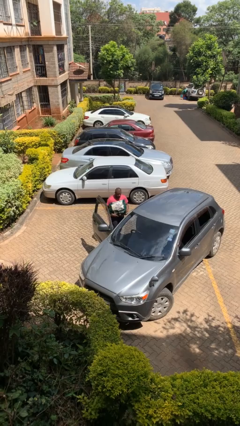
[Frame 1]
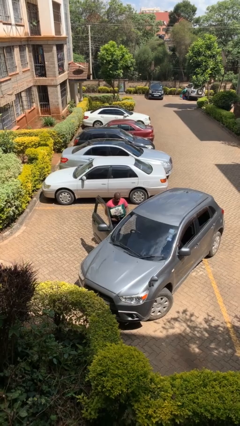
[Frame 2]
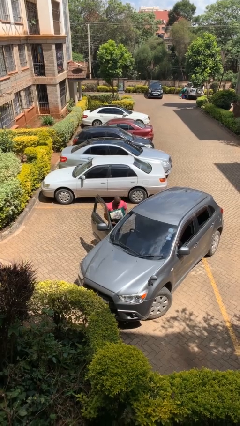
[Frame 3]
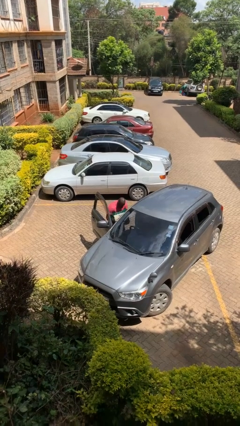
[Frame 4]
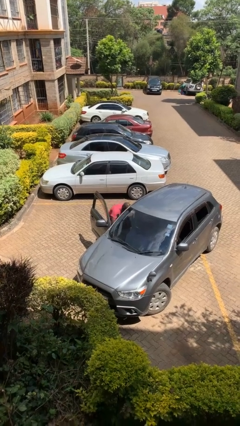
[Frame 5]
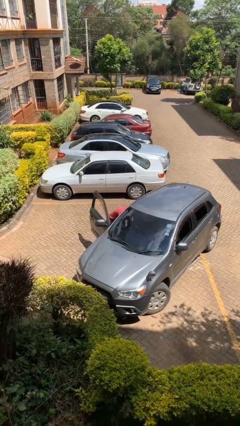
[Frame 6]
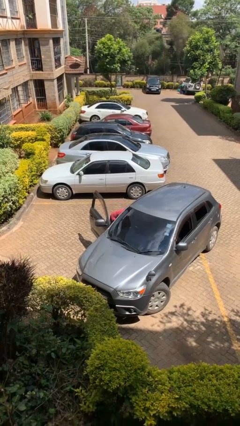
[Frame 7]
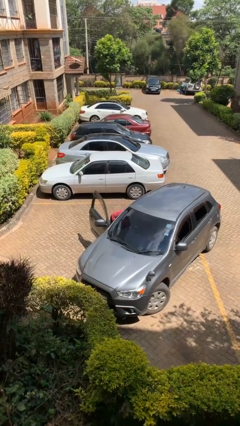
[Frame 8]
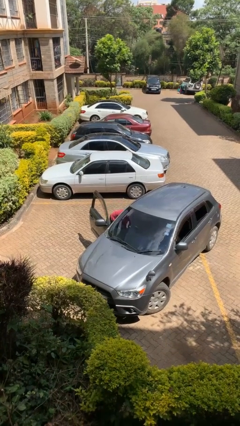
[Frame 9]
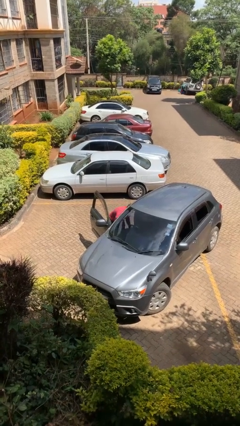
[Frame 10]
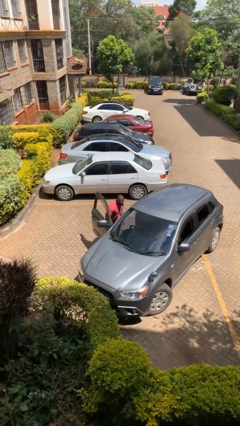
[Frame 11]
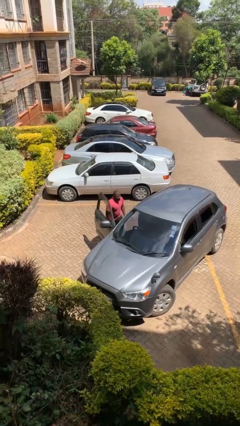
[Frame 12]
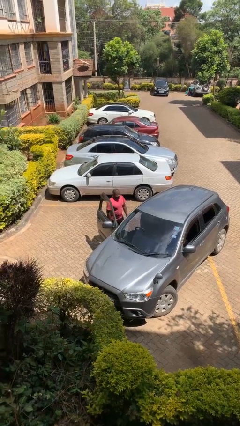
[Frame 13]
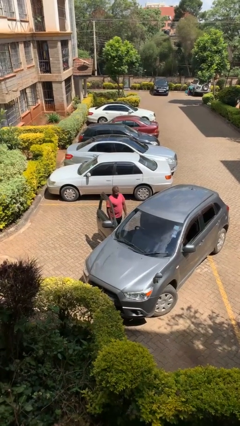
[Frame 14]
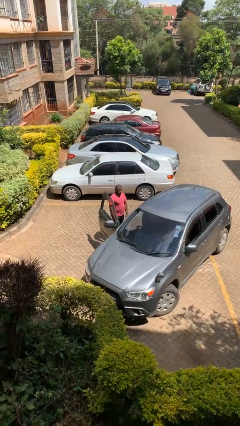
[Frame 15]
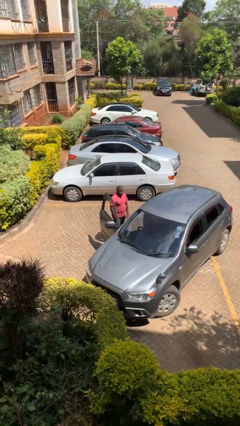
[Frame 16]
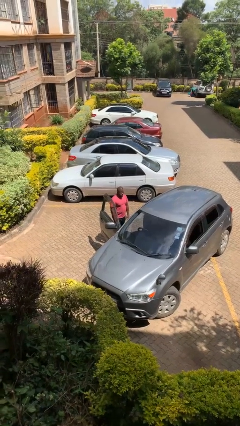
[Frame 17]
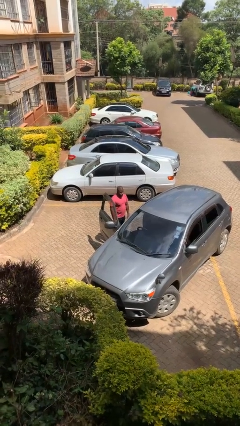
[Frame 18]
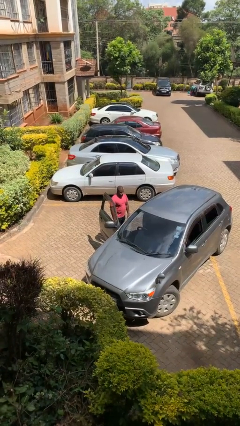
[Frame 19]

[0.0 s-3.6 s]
person loads car

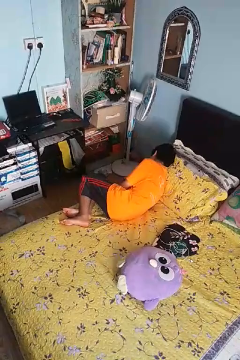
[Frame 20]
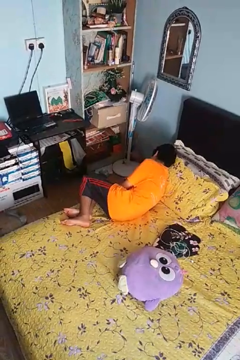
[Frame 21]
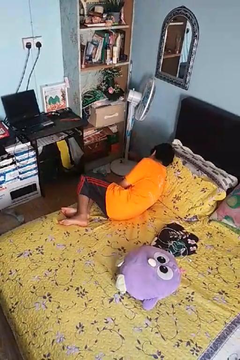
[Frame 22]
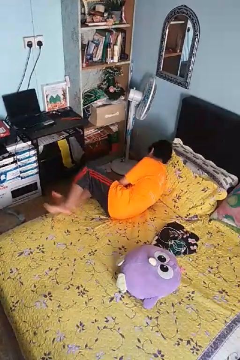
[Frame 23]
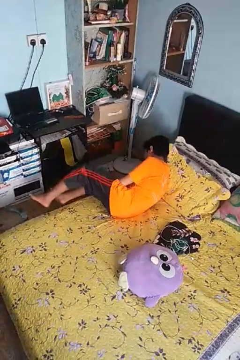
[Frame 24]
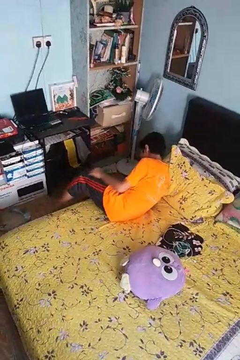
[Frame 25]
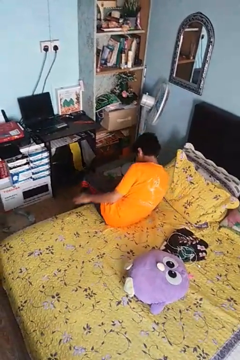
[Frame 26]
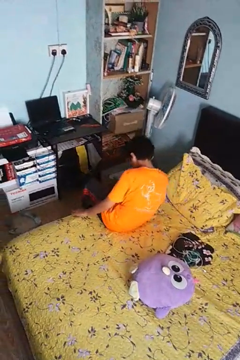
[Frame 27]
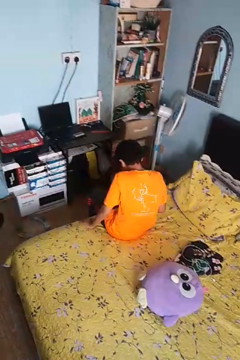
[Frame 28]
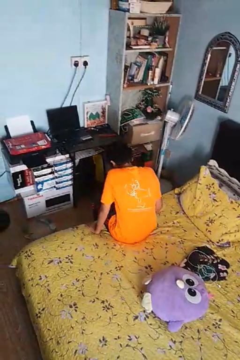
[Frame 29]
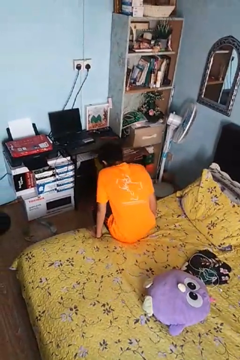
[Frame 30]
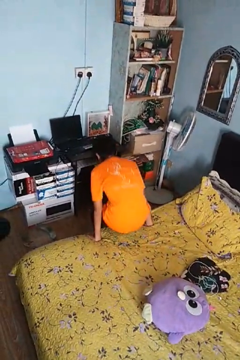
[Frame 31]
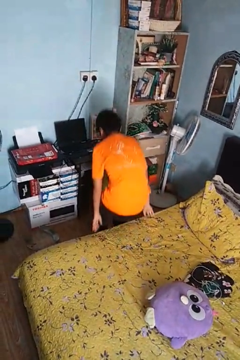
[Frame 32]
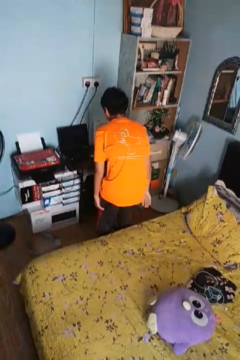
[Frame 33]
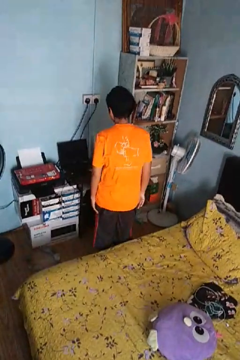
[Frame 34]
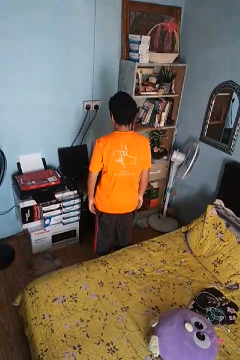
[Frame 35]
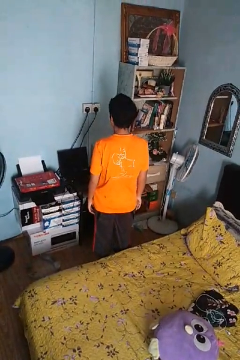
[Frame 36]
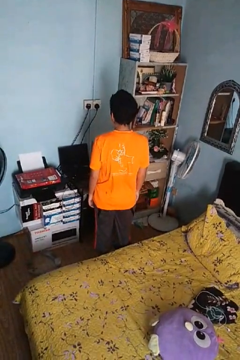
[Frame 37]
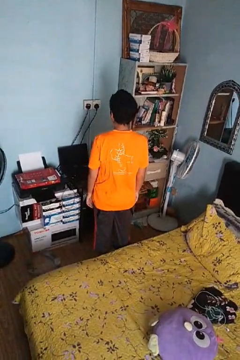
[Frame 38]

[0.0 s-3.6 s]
person stands up

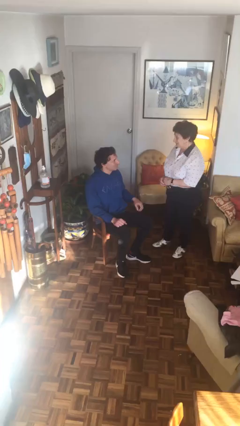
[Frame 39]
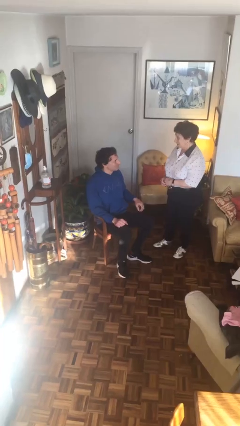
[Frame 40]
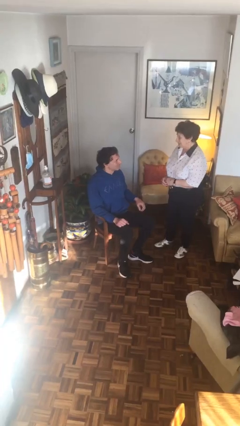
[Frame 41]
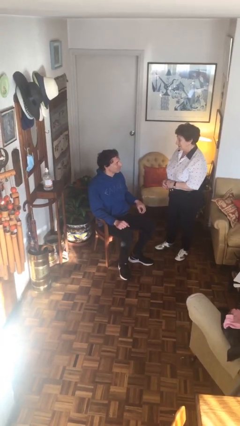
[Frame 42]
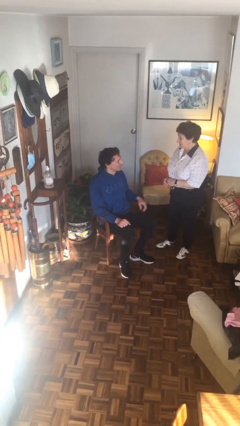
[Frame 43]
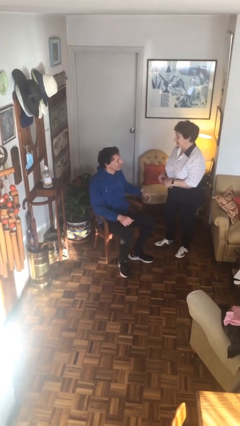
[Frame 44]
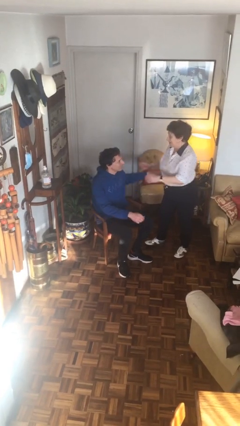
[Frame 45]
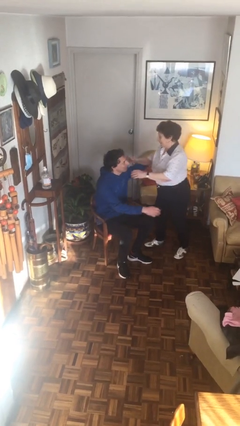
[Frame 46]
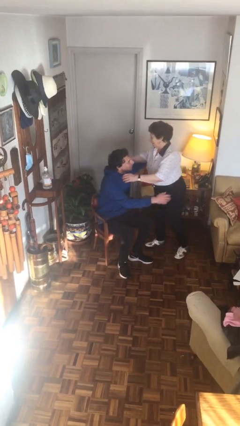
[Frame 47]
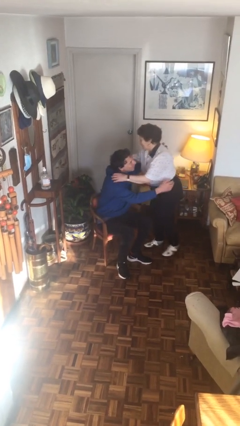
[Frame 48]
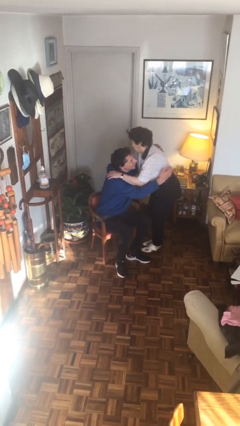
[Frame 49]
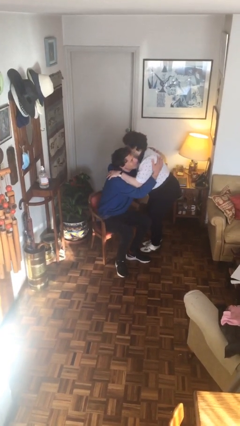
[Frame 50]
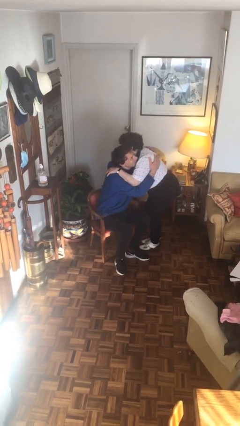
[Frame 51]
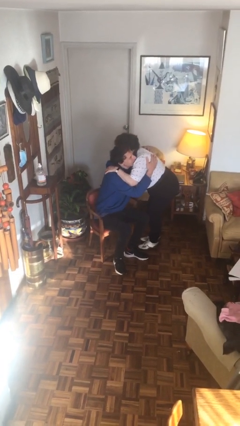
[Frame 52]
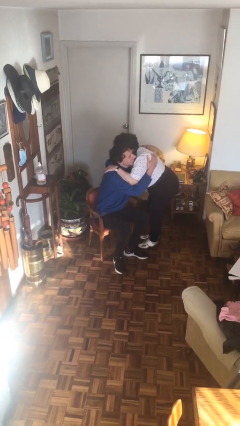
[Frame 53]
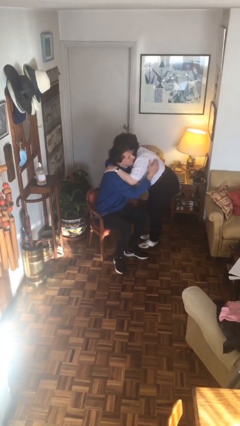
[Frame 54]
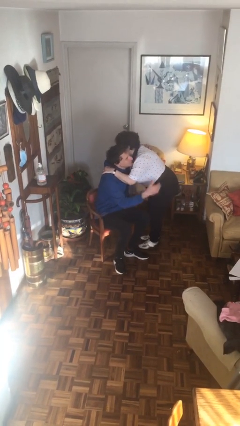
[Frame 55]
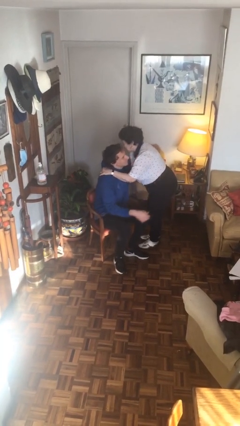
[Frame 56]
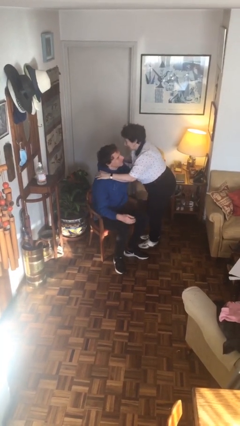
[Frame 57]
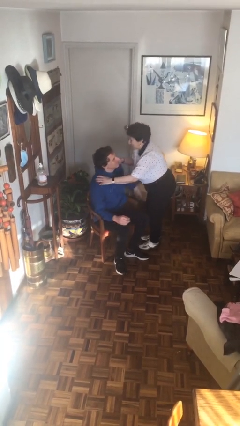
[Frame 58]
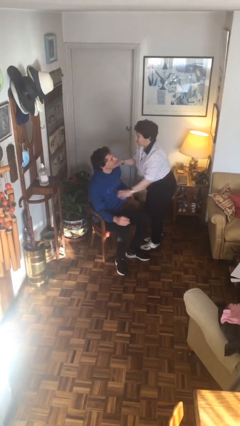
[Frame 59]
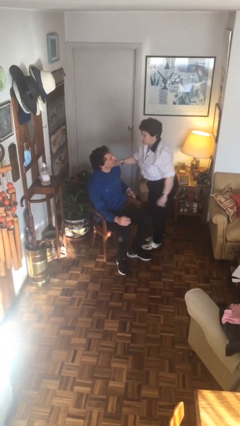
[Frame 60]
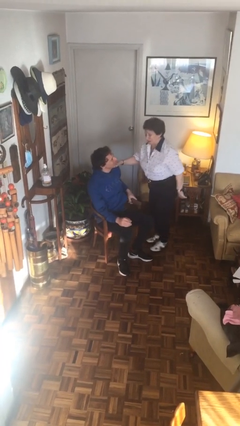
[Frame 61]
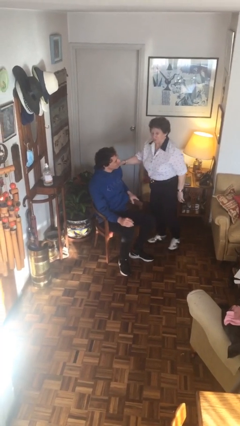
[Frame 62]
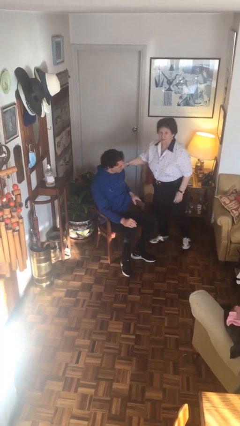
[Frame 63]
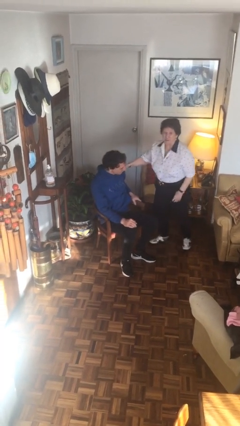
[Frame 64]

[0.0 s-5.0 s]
person embraces person

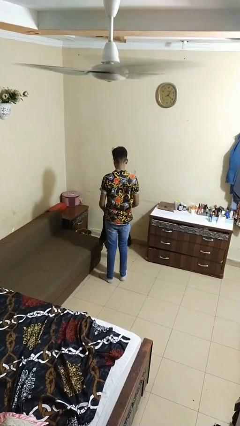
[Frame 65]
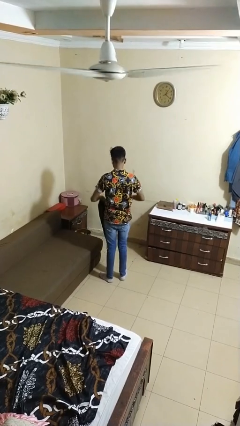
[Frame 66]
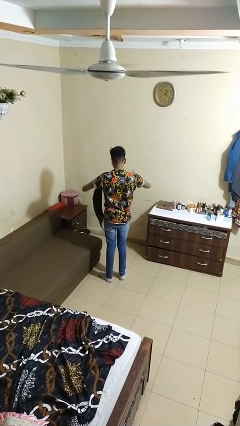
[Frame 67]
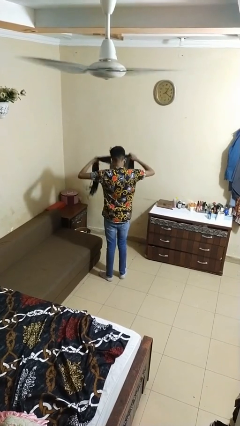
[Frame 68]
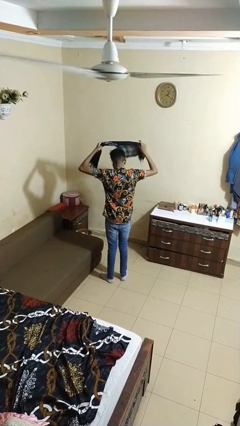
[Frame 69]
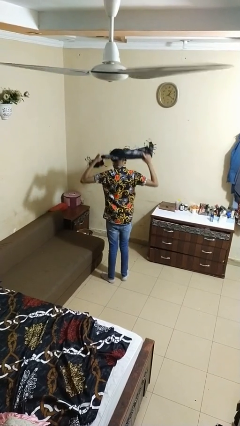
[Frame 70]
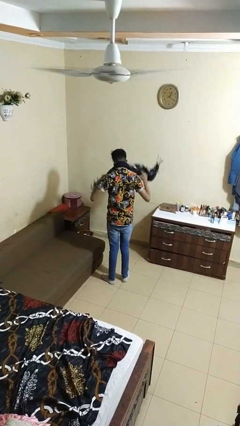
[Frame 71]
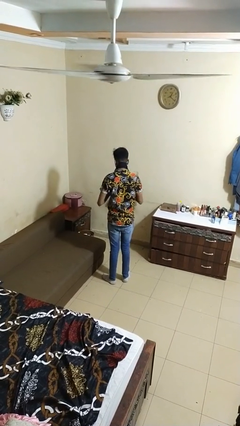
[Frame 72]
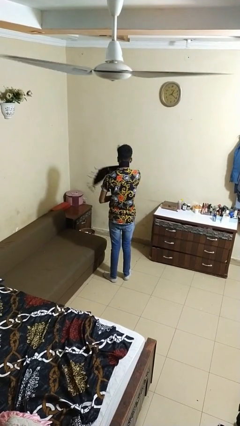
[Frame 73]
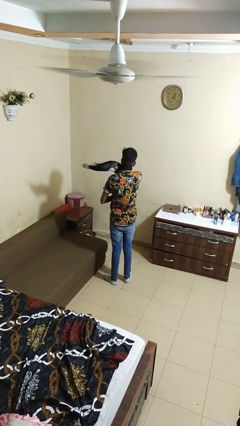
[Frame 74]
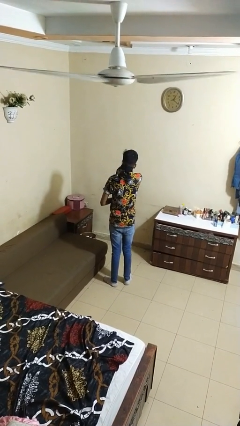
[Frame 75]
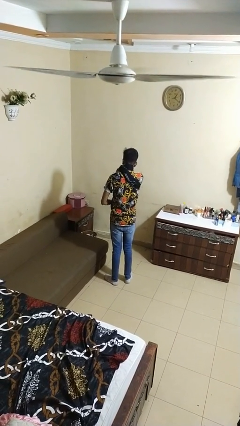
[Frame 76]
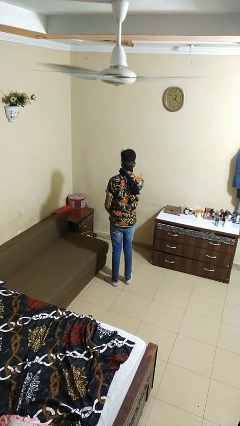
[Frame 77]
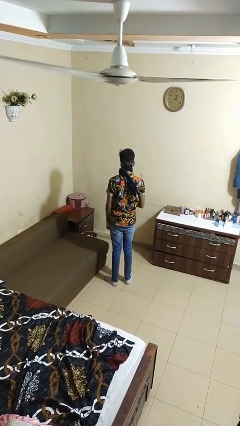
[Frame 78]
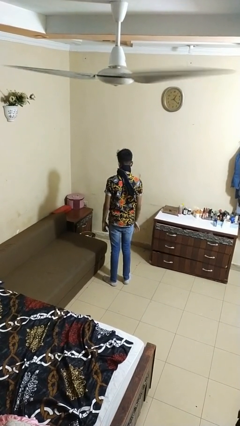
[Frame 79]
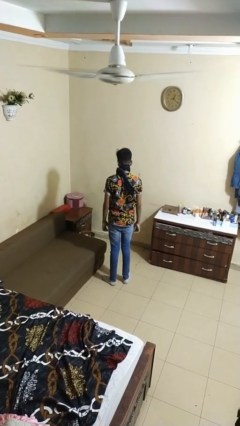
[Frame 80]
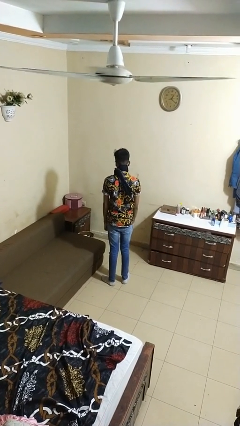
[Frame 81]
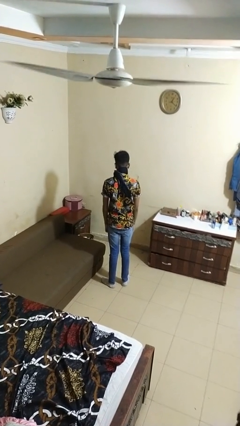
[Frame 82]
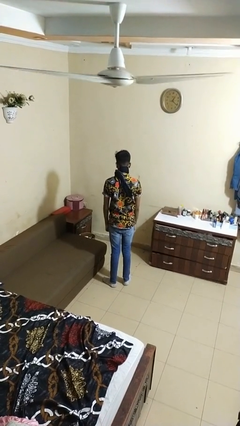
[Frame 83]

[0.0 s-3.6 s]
person puts on scarf

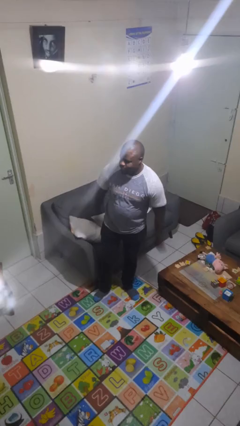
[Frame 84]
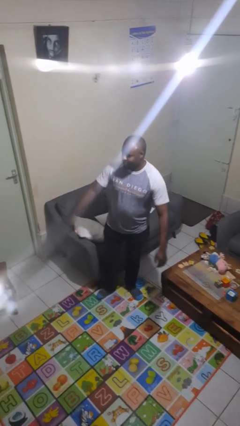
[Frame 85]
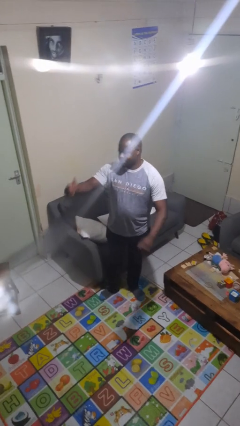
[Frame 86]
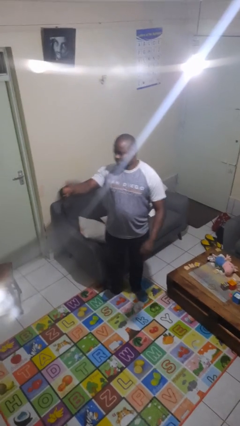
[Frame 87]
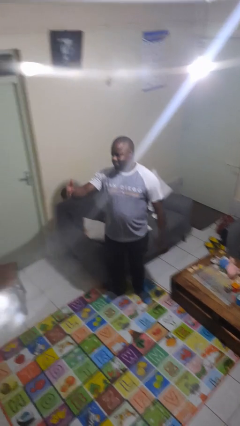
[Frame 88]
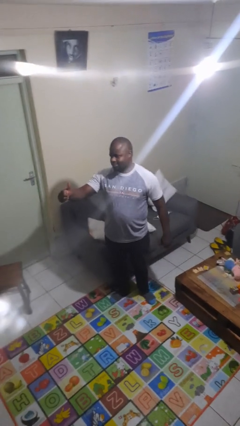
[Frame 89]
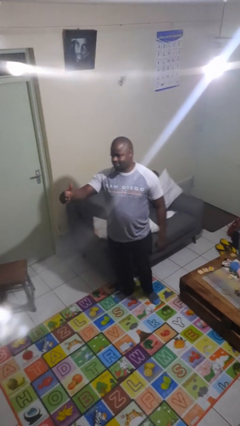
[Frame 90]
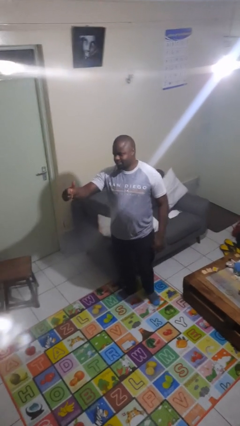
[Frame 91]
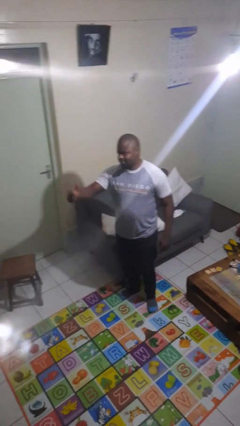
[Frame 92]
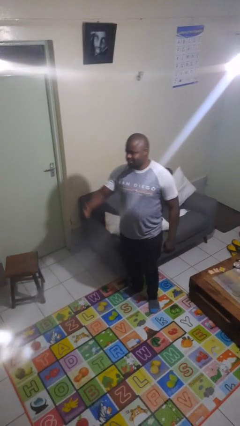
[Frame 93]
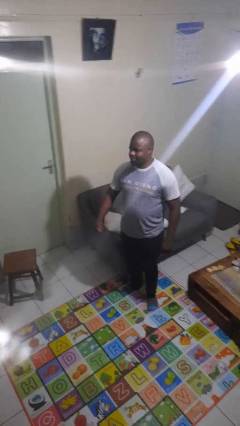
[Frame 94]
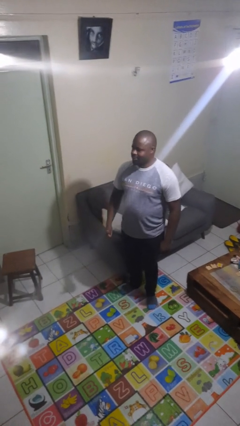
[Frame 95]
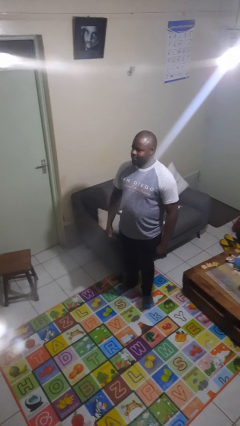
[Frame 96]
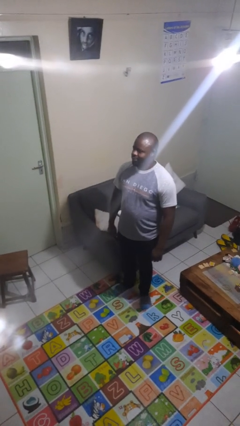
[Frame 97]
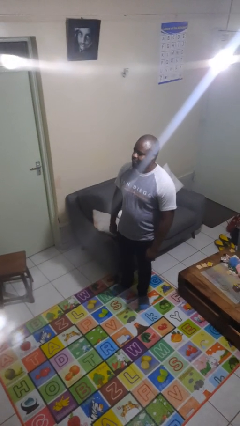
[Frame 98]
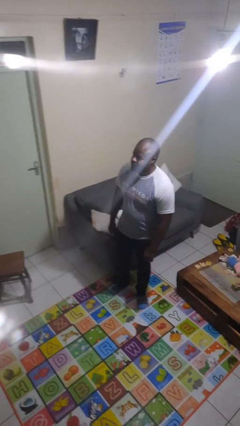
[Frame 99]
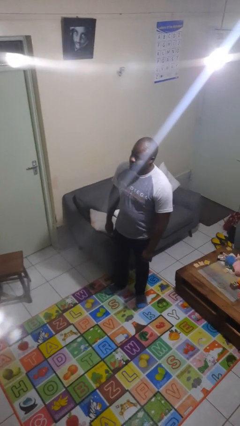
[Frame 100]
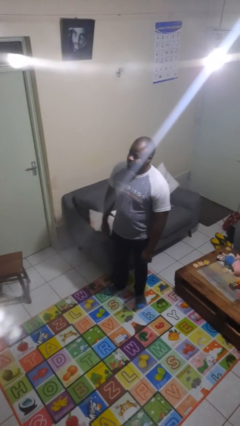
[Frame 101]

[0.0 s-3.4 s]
person gestures thumbs up
